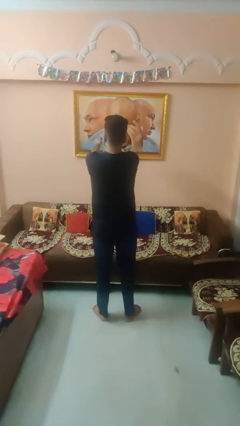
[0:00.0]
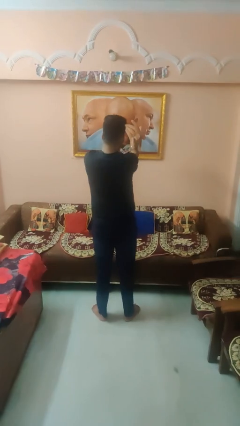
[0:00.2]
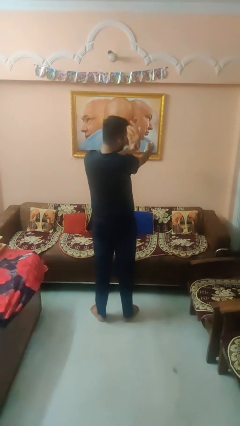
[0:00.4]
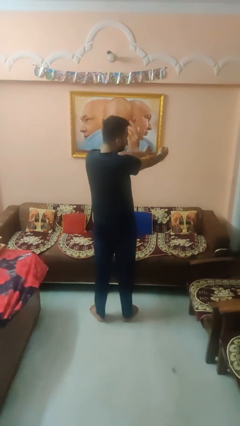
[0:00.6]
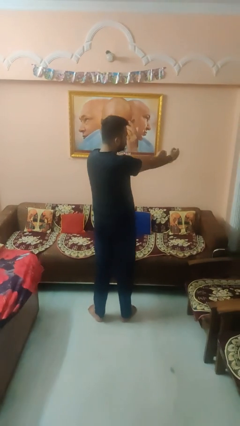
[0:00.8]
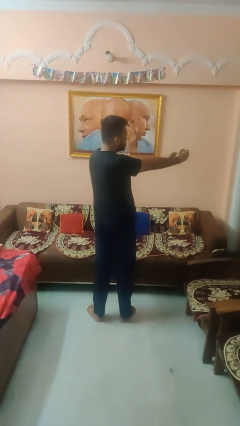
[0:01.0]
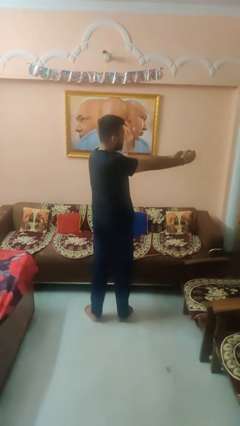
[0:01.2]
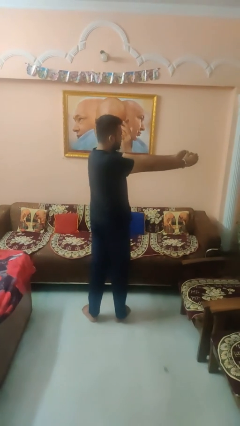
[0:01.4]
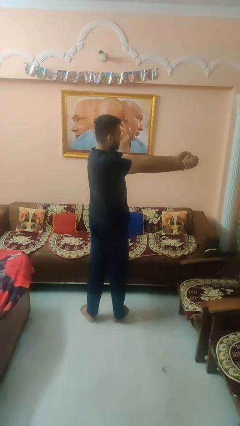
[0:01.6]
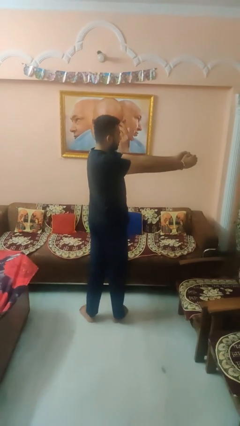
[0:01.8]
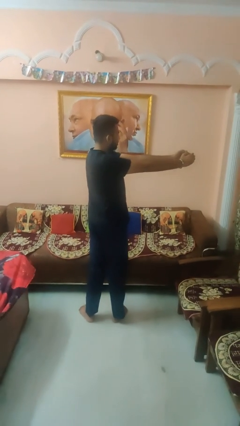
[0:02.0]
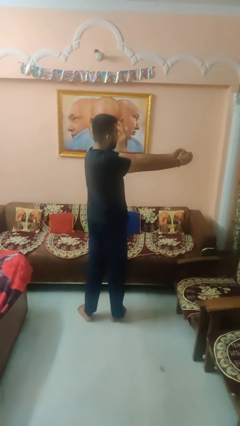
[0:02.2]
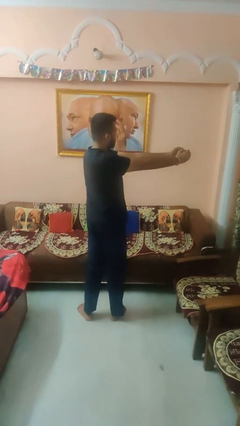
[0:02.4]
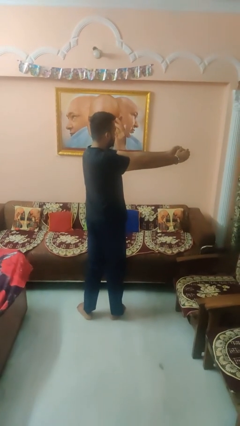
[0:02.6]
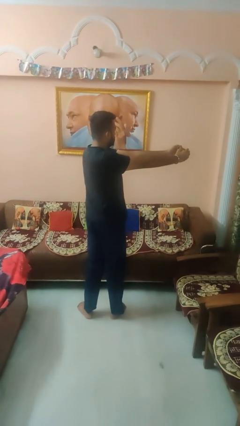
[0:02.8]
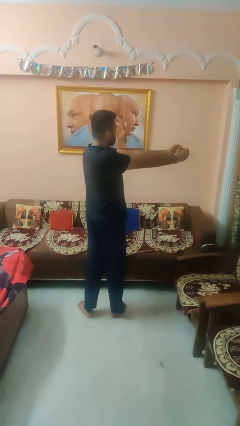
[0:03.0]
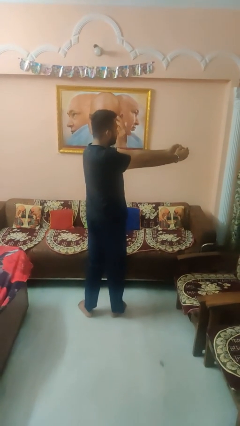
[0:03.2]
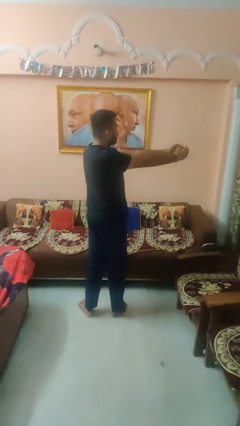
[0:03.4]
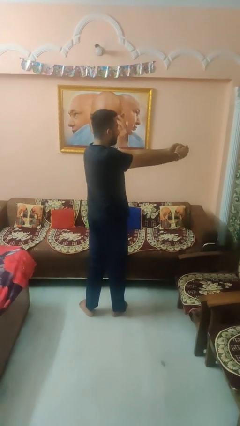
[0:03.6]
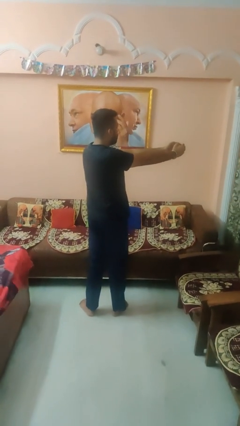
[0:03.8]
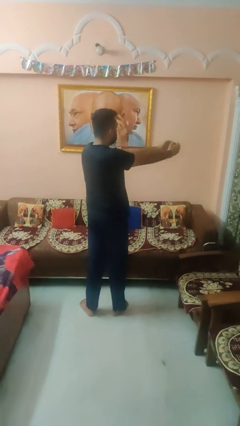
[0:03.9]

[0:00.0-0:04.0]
person gestures swipe right

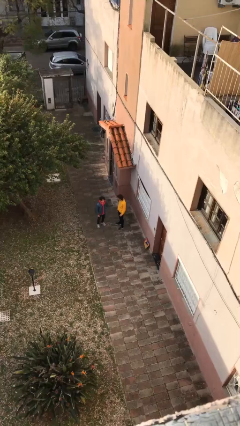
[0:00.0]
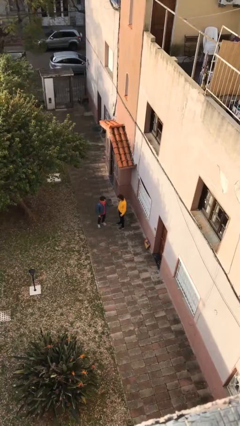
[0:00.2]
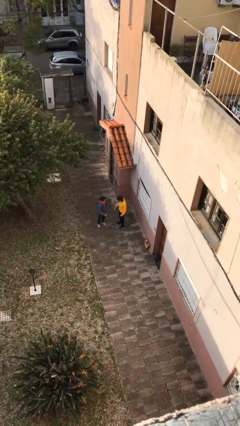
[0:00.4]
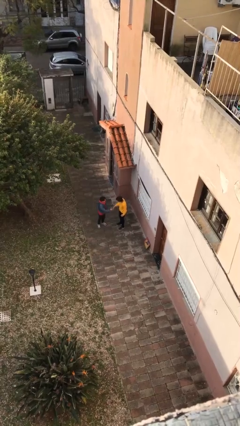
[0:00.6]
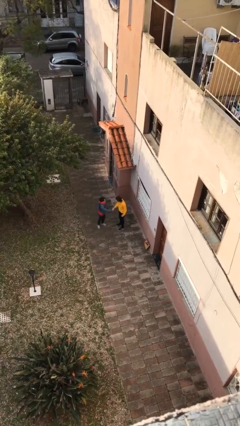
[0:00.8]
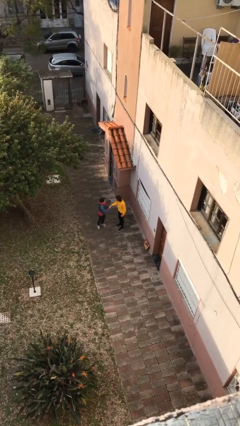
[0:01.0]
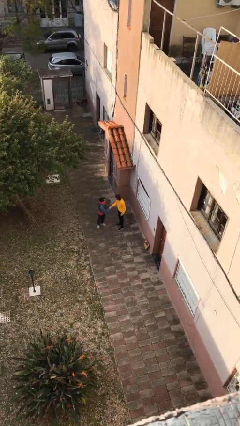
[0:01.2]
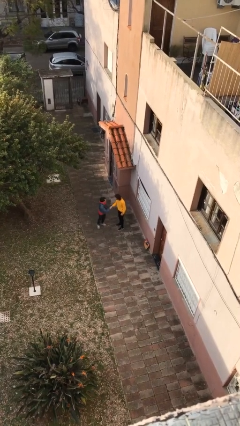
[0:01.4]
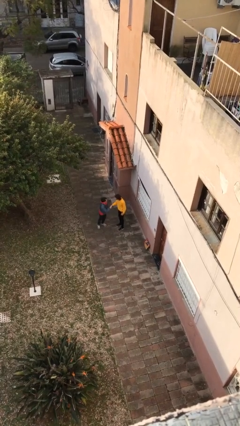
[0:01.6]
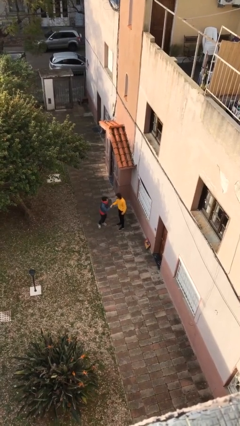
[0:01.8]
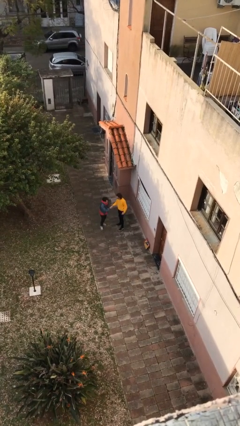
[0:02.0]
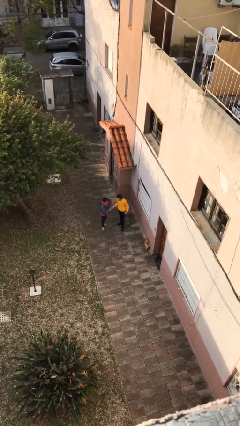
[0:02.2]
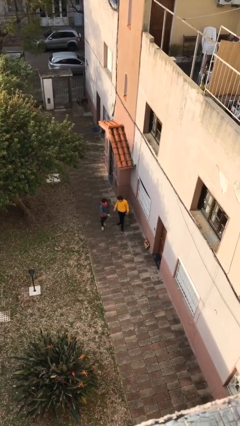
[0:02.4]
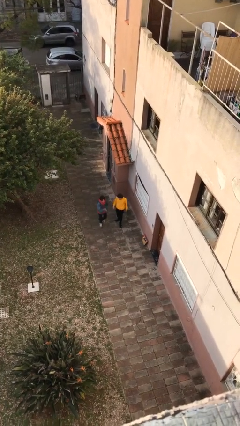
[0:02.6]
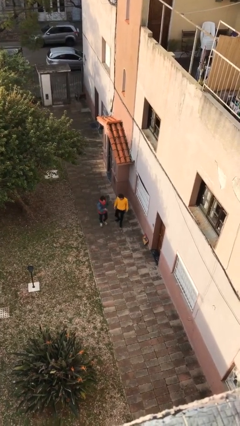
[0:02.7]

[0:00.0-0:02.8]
person shakes hand

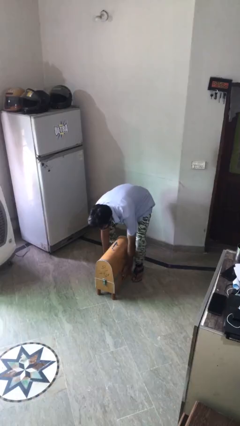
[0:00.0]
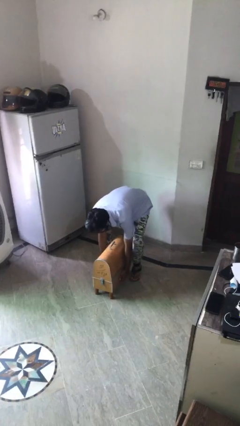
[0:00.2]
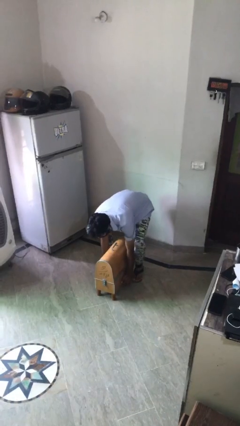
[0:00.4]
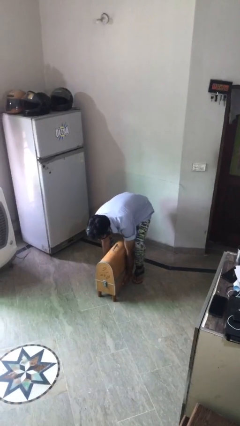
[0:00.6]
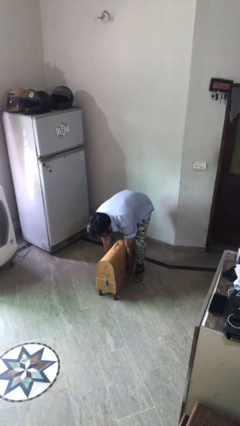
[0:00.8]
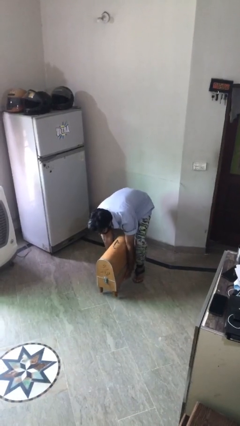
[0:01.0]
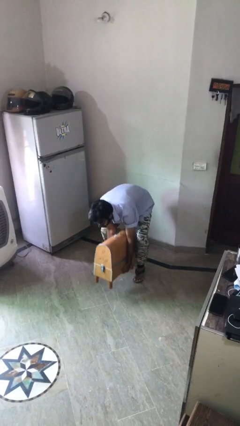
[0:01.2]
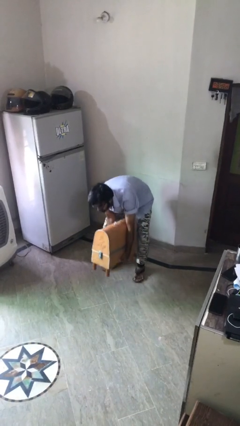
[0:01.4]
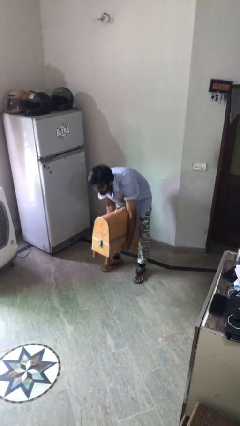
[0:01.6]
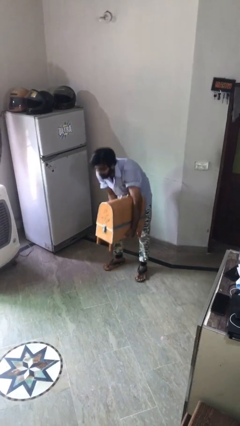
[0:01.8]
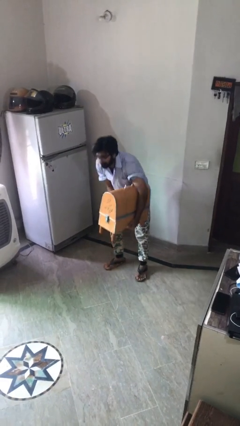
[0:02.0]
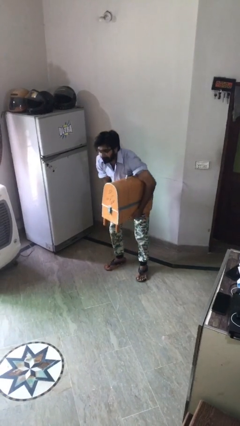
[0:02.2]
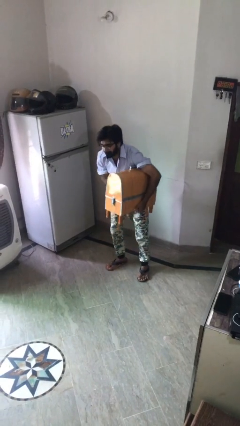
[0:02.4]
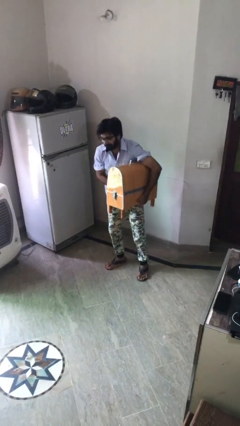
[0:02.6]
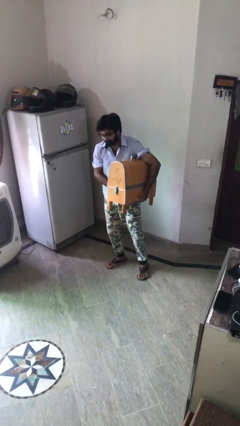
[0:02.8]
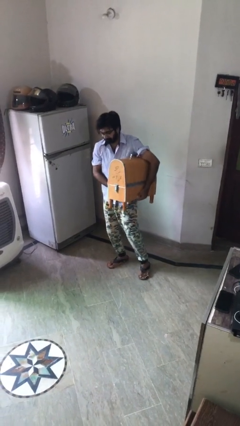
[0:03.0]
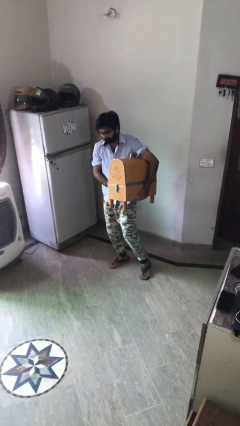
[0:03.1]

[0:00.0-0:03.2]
person picks up object from floor

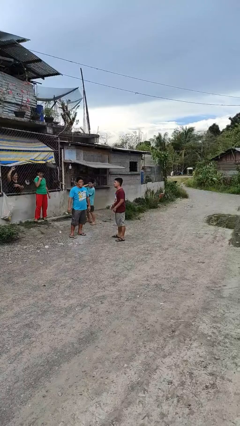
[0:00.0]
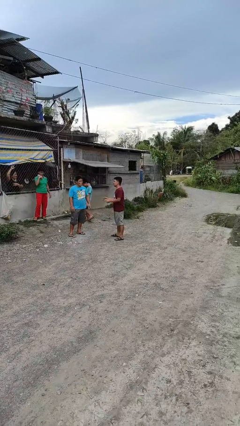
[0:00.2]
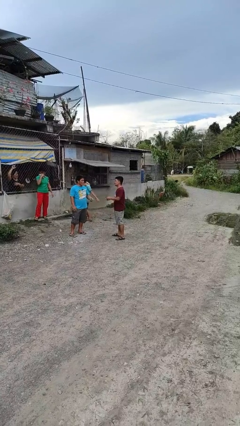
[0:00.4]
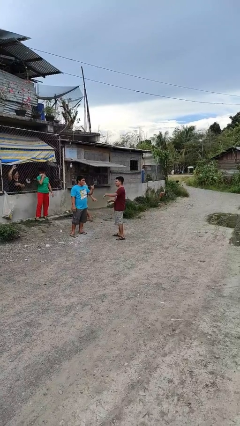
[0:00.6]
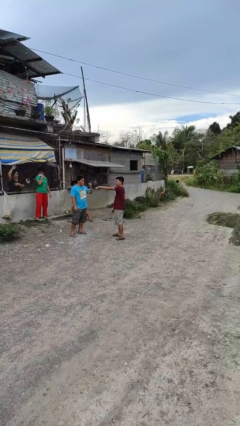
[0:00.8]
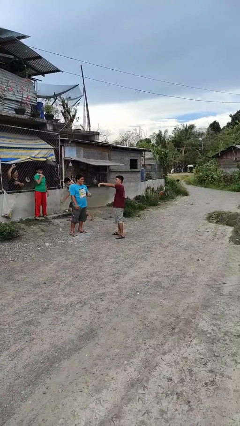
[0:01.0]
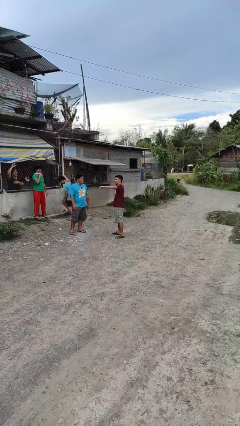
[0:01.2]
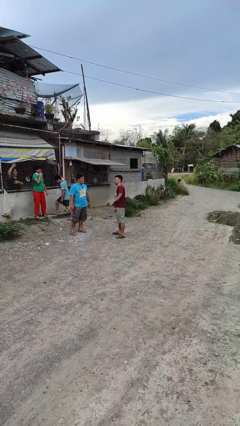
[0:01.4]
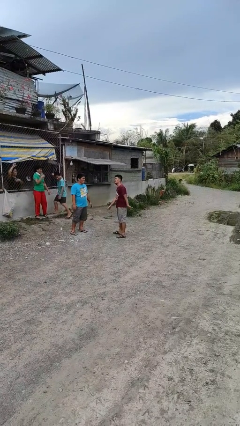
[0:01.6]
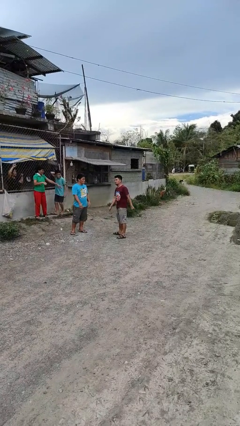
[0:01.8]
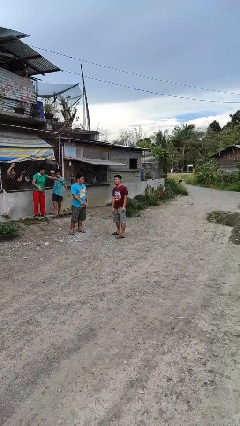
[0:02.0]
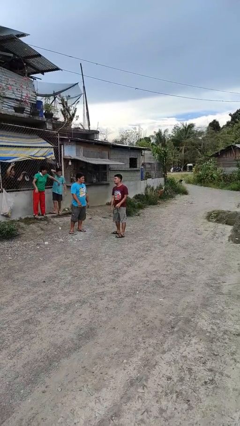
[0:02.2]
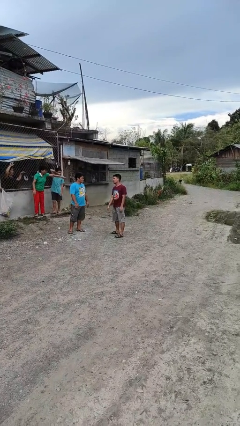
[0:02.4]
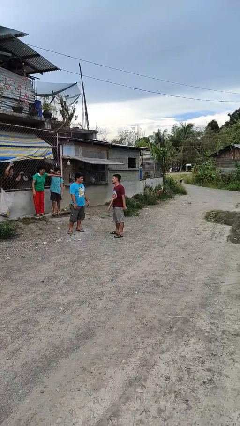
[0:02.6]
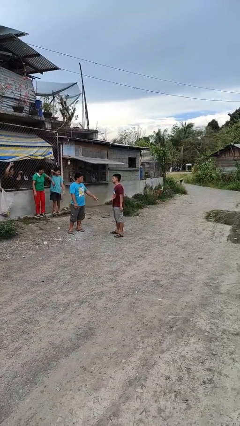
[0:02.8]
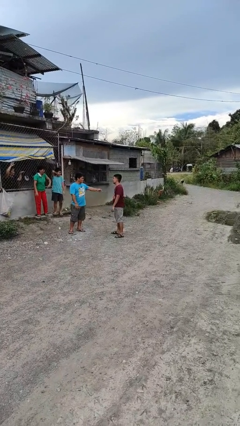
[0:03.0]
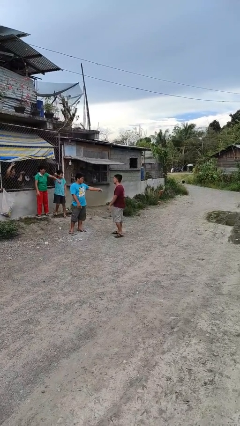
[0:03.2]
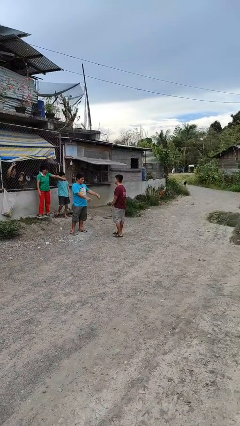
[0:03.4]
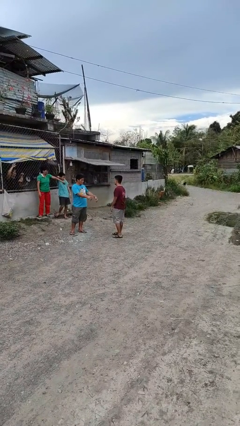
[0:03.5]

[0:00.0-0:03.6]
person talks to person

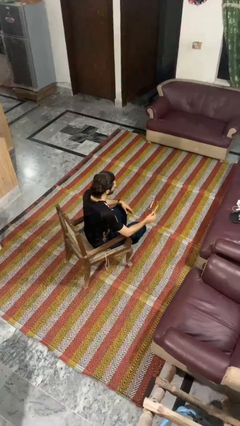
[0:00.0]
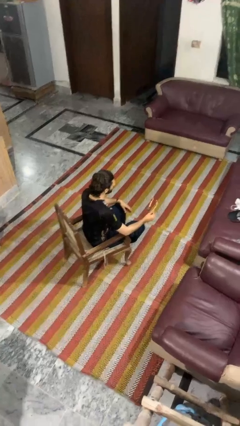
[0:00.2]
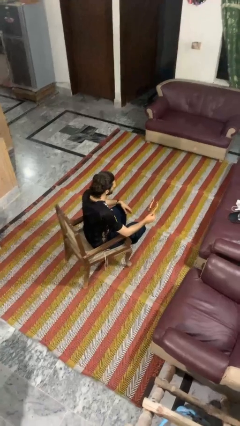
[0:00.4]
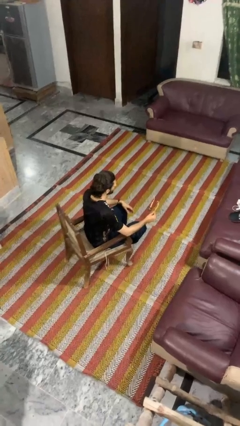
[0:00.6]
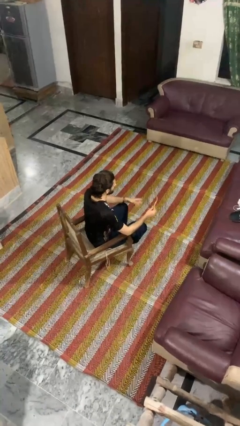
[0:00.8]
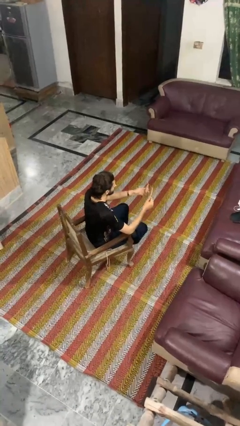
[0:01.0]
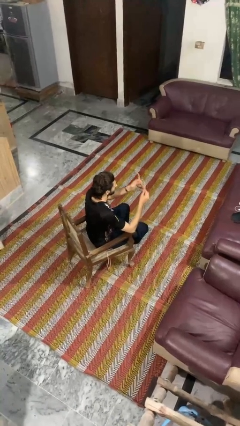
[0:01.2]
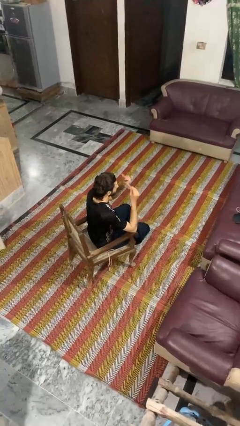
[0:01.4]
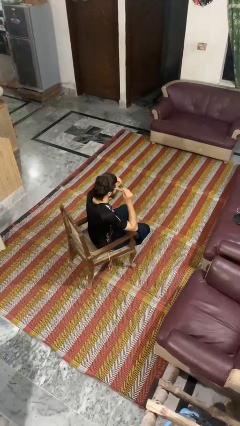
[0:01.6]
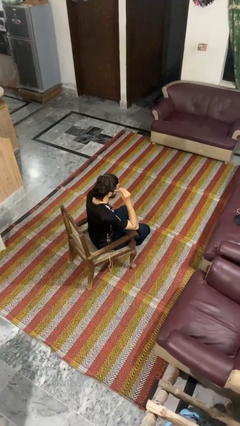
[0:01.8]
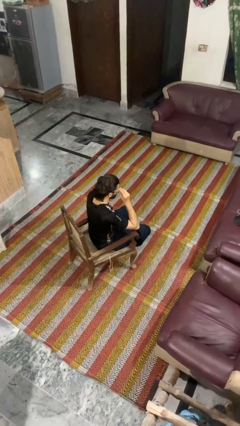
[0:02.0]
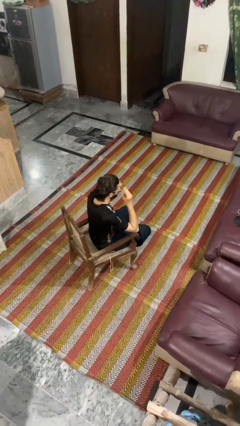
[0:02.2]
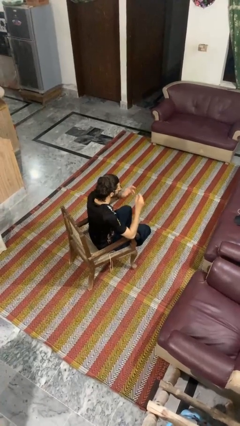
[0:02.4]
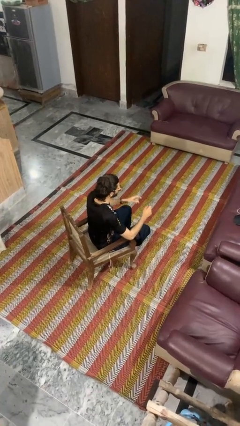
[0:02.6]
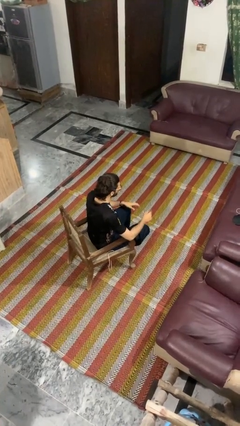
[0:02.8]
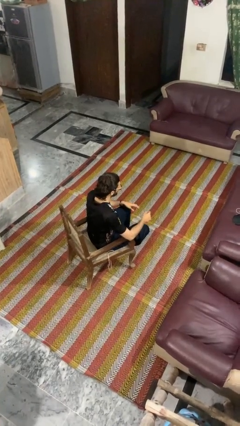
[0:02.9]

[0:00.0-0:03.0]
person puts on glasses

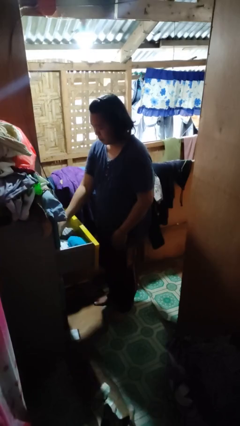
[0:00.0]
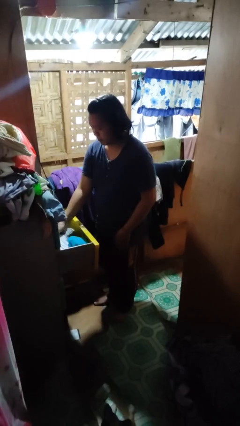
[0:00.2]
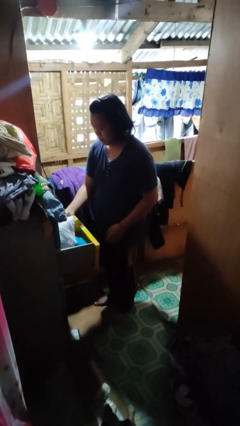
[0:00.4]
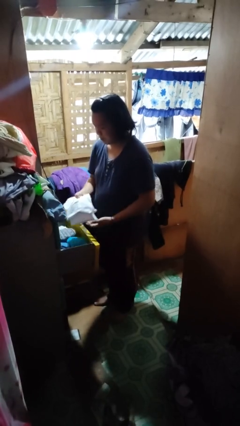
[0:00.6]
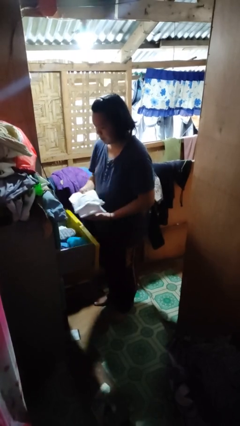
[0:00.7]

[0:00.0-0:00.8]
person takes clothes from dresser
